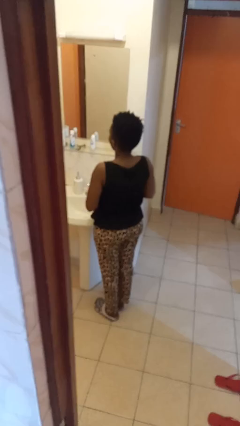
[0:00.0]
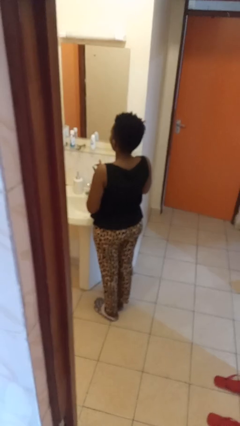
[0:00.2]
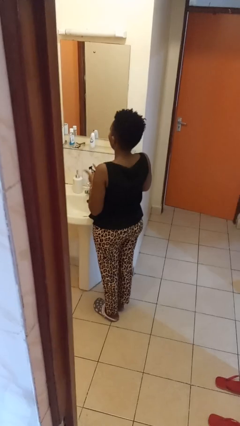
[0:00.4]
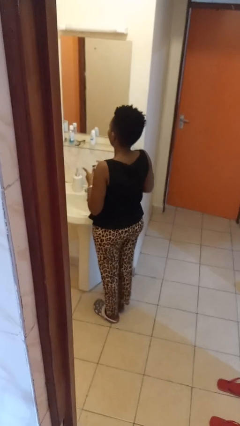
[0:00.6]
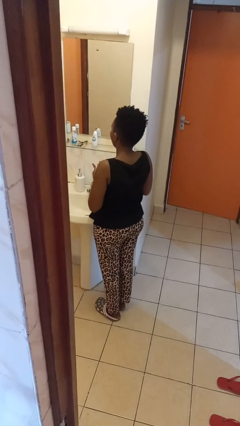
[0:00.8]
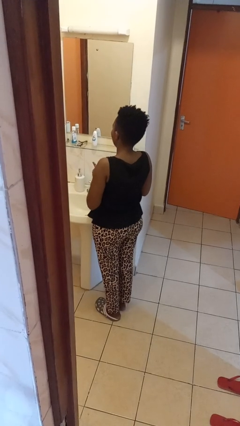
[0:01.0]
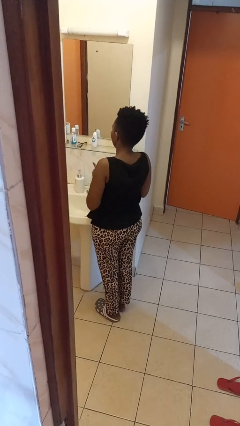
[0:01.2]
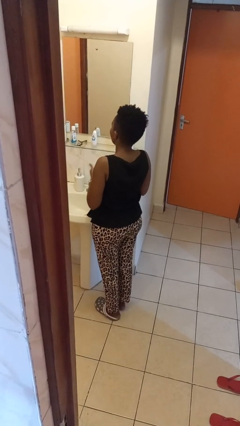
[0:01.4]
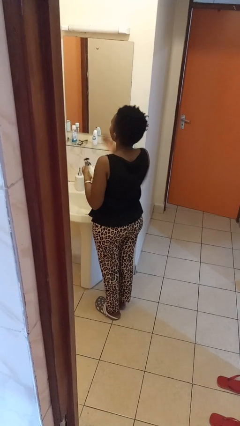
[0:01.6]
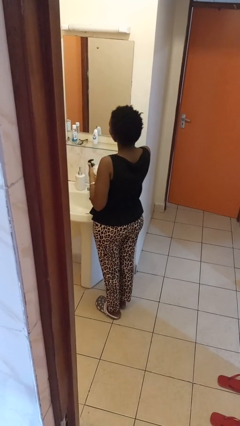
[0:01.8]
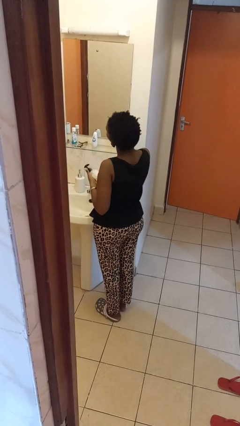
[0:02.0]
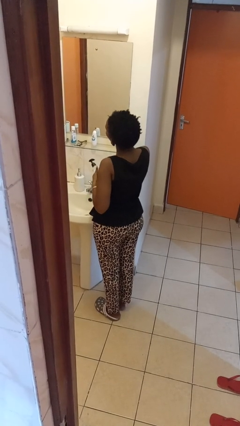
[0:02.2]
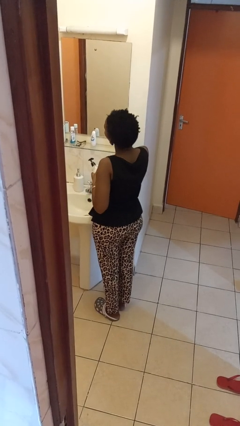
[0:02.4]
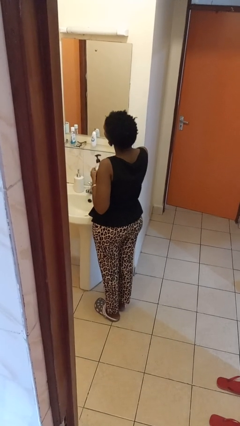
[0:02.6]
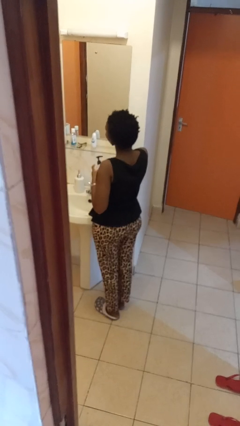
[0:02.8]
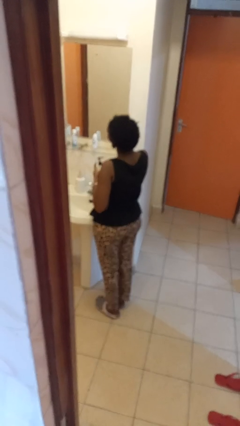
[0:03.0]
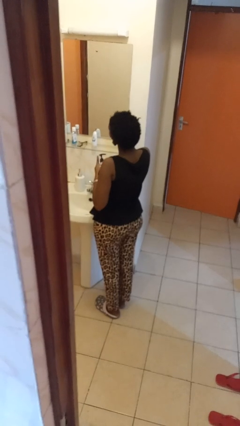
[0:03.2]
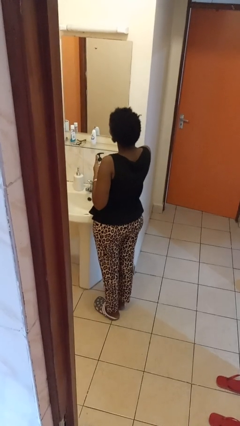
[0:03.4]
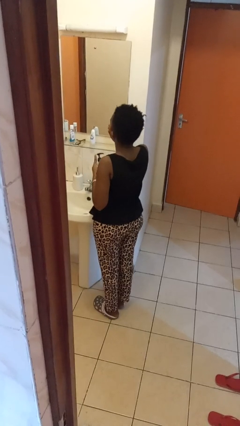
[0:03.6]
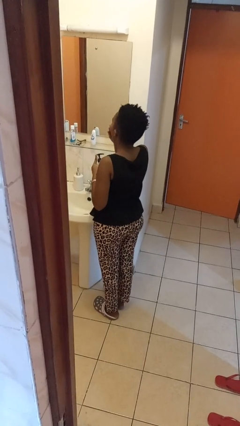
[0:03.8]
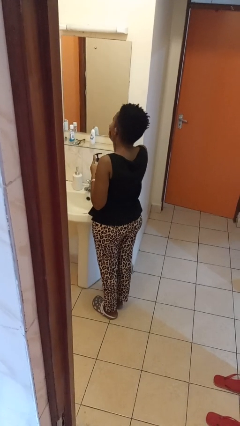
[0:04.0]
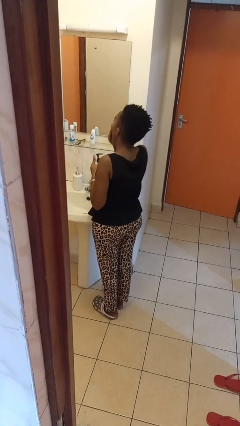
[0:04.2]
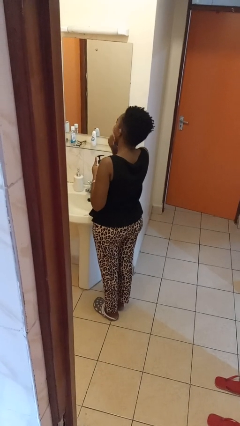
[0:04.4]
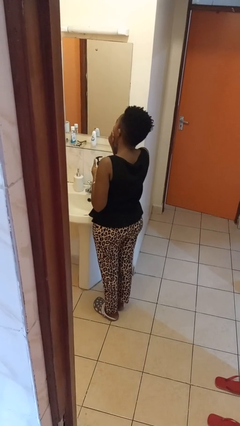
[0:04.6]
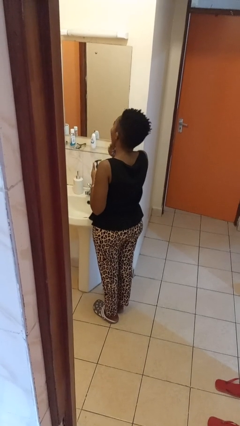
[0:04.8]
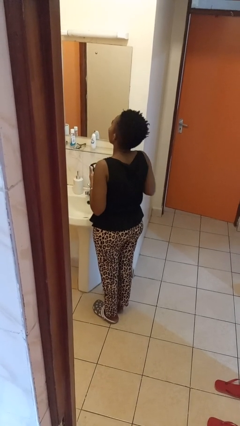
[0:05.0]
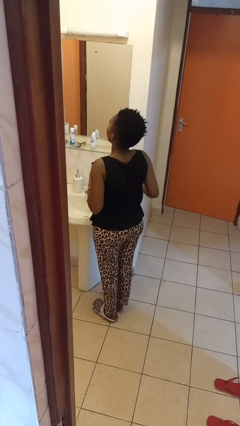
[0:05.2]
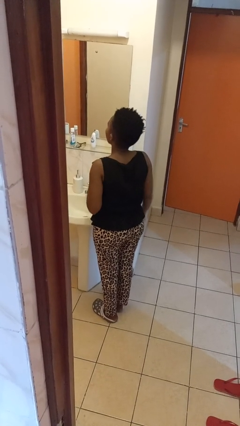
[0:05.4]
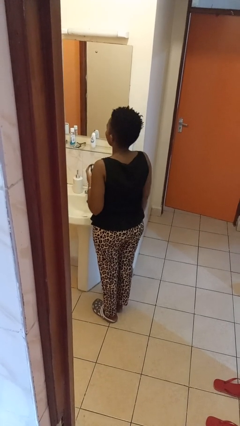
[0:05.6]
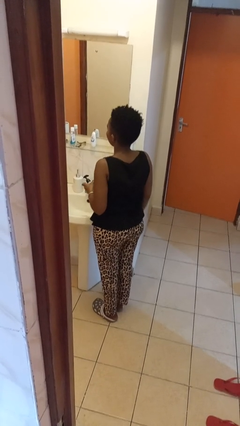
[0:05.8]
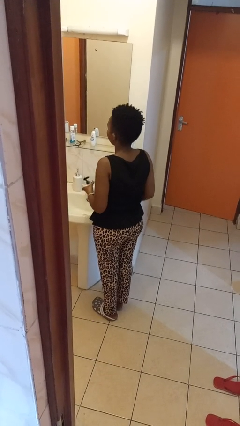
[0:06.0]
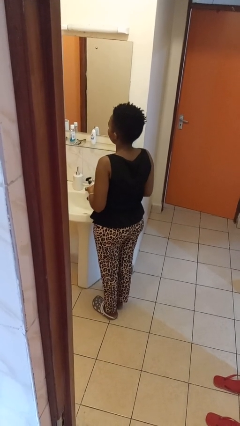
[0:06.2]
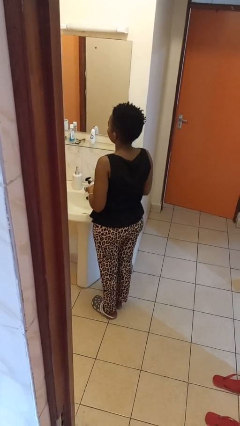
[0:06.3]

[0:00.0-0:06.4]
person applies facial moisturizer

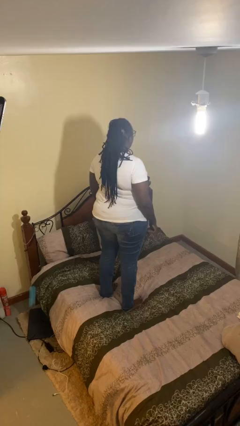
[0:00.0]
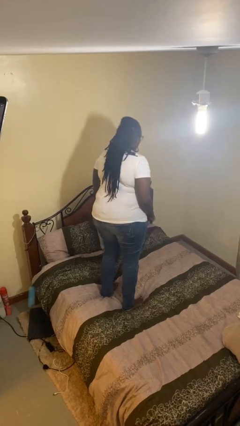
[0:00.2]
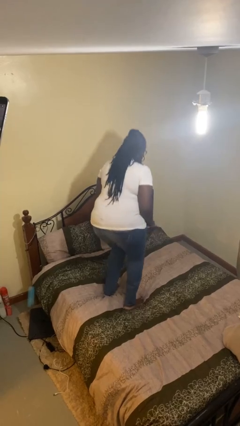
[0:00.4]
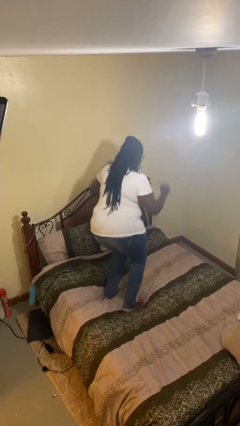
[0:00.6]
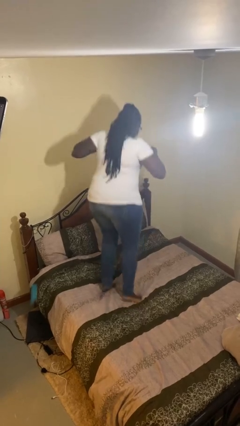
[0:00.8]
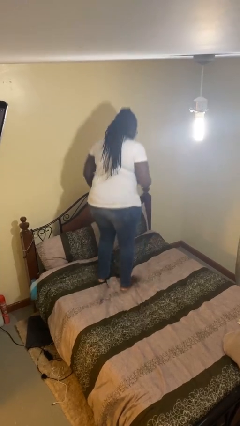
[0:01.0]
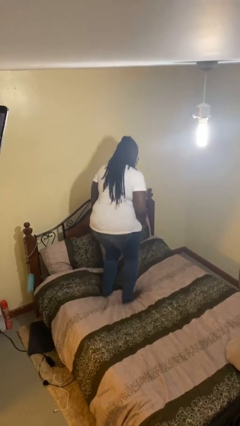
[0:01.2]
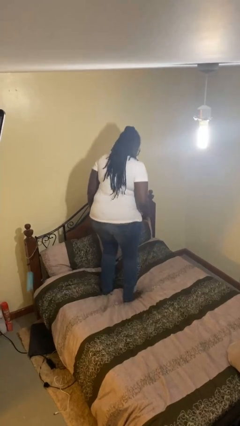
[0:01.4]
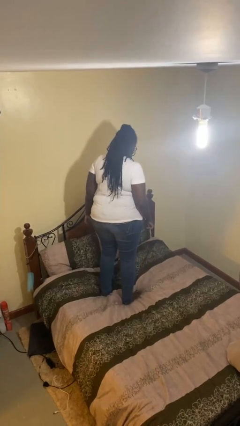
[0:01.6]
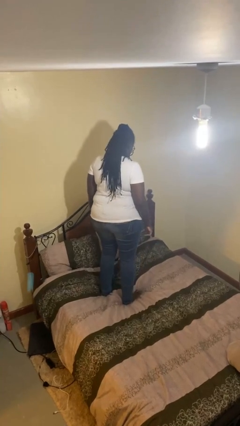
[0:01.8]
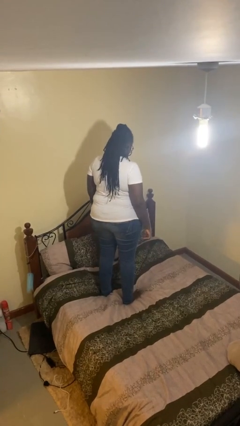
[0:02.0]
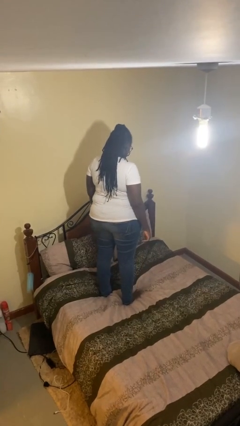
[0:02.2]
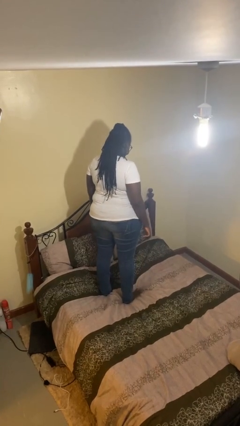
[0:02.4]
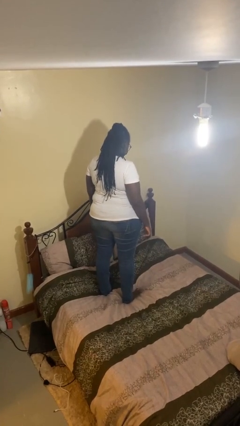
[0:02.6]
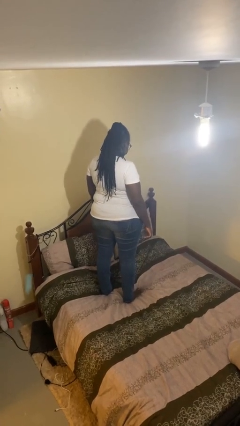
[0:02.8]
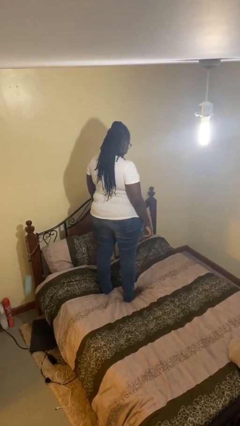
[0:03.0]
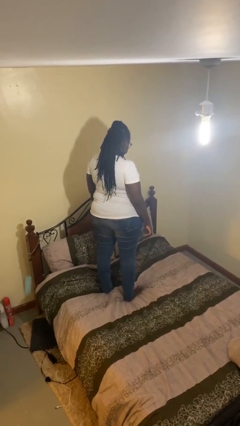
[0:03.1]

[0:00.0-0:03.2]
person jumps on bed

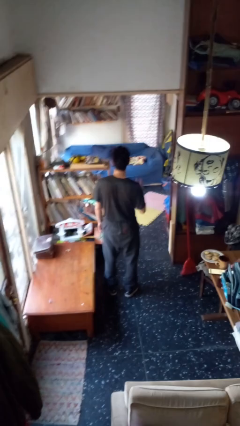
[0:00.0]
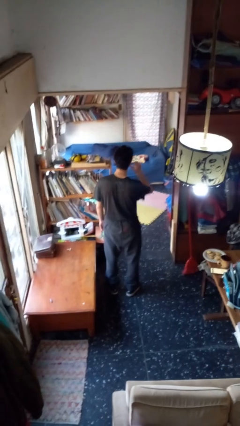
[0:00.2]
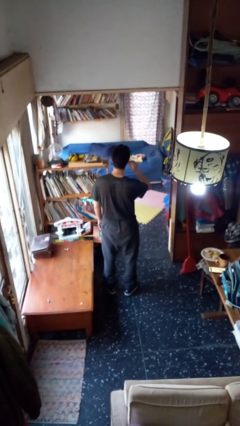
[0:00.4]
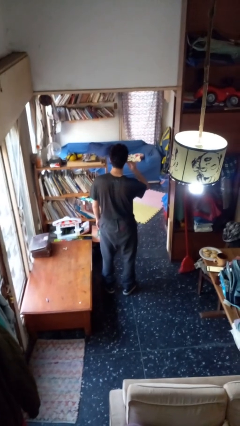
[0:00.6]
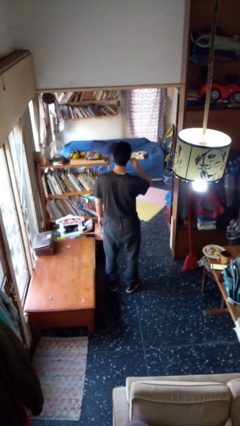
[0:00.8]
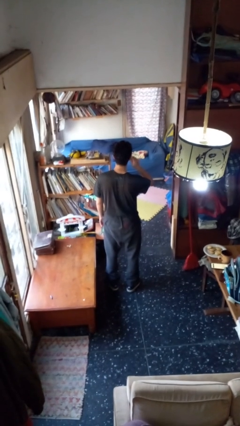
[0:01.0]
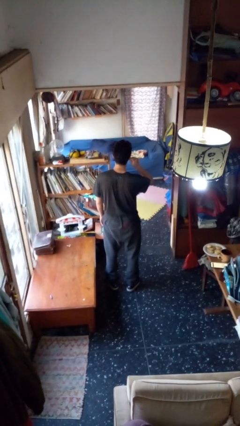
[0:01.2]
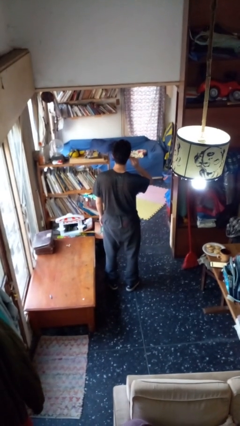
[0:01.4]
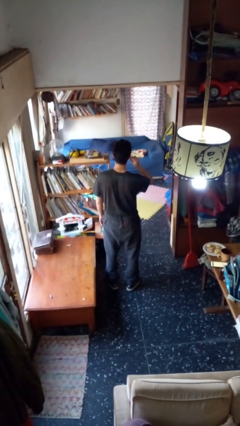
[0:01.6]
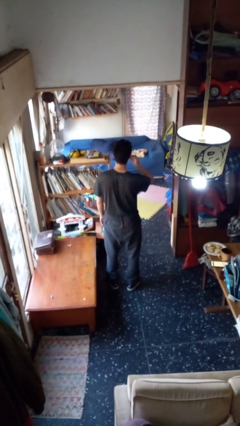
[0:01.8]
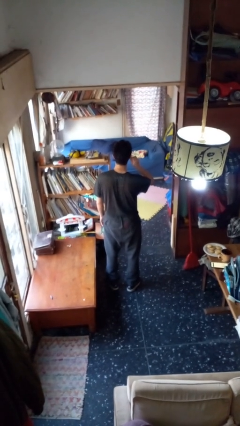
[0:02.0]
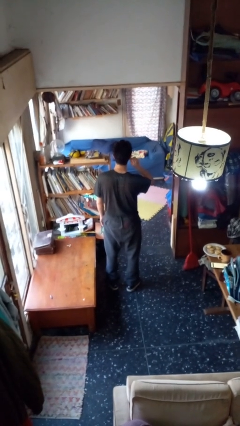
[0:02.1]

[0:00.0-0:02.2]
person touches earlobe

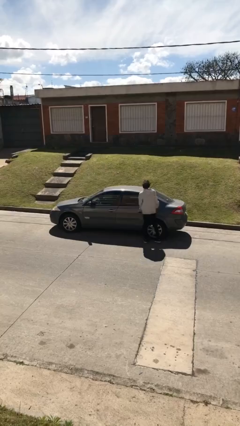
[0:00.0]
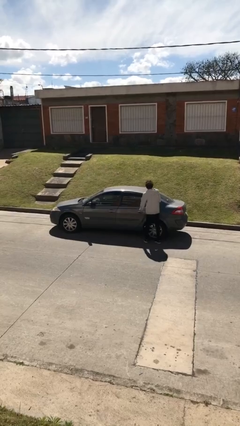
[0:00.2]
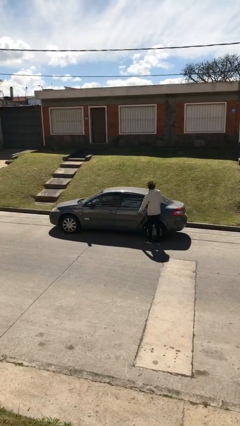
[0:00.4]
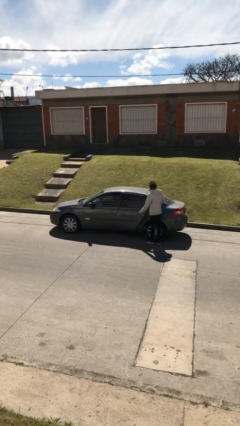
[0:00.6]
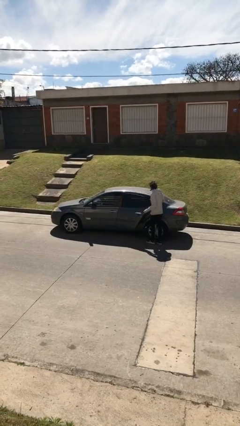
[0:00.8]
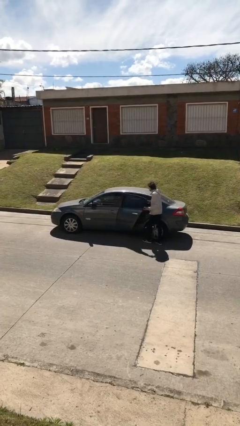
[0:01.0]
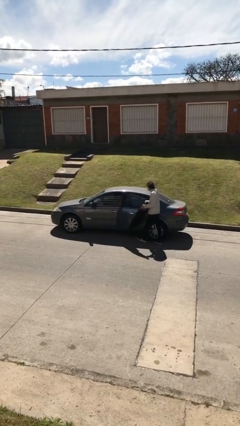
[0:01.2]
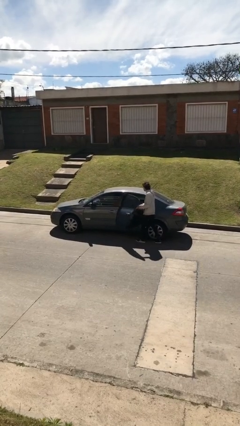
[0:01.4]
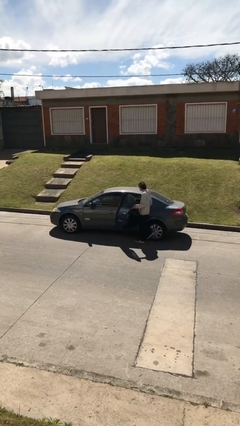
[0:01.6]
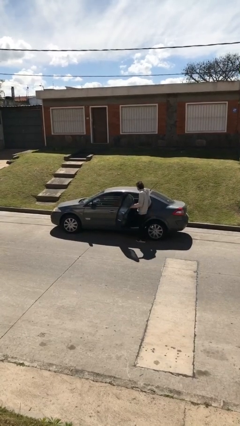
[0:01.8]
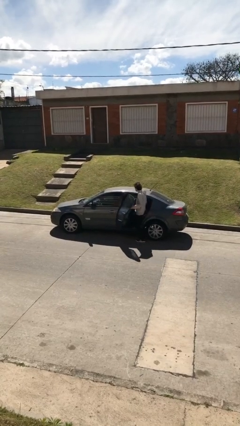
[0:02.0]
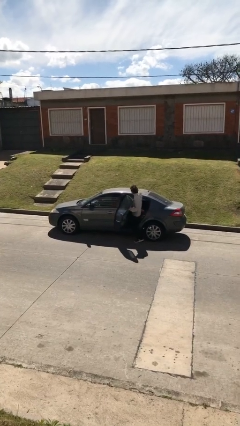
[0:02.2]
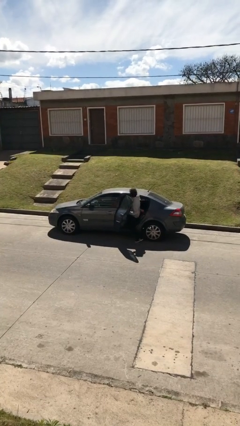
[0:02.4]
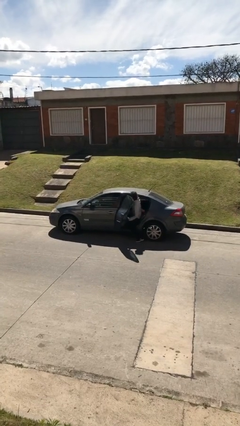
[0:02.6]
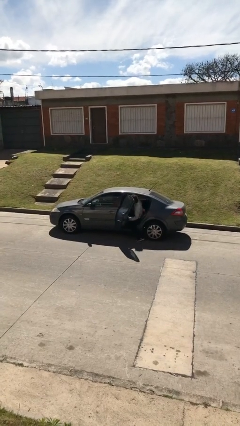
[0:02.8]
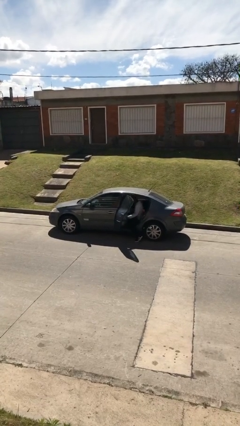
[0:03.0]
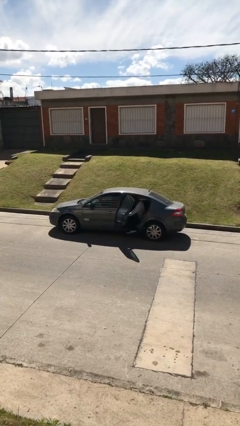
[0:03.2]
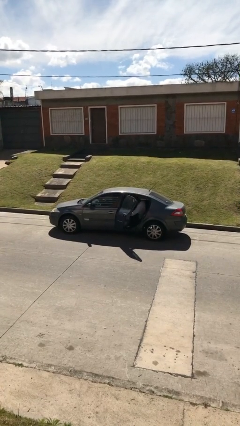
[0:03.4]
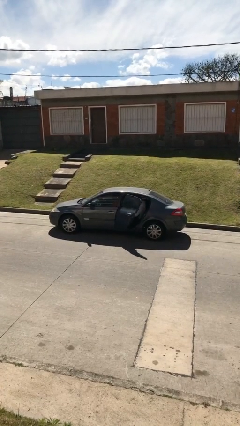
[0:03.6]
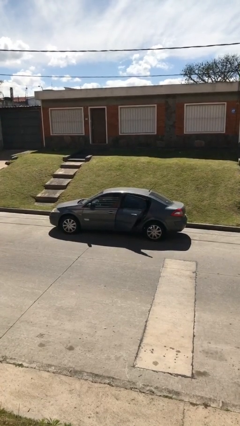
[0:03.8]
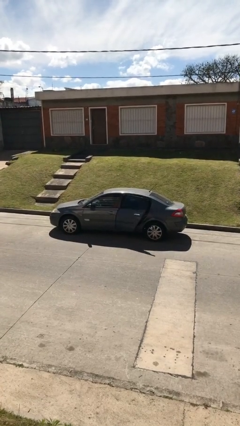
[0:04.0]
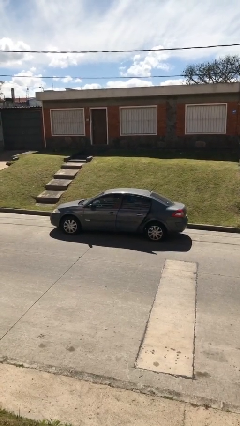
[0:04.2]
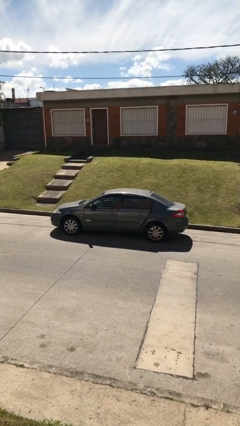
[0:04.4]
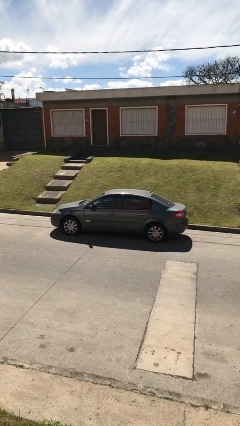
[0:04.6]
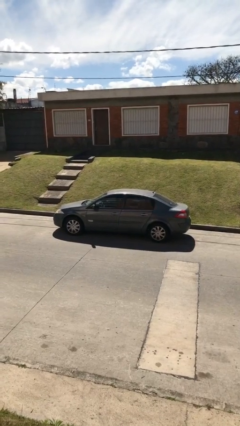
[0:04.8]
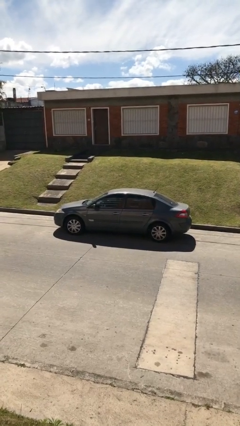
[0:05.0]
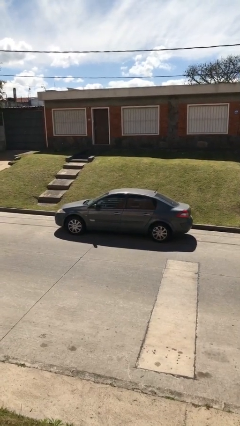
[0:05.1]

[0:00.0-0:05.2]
car picks up person

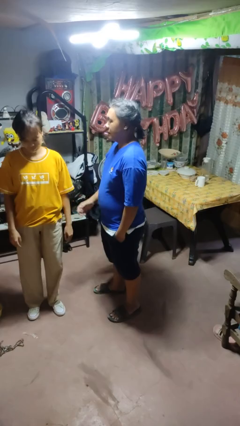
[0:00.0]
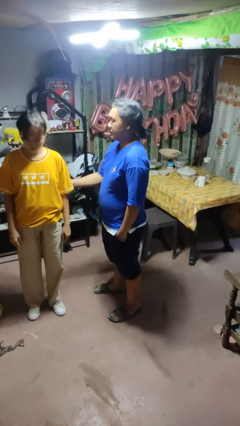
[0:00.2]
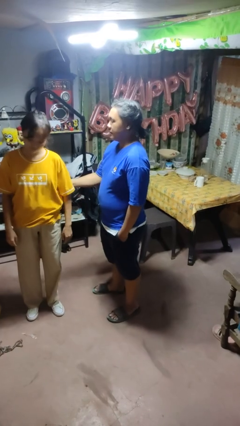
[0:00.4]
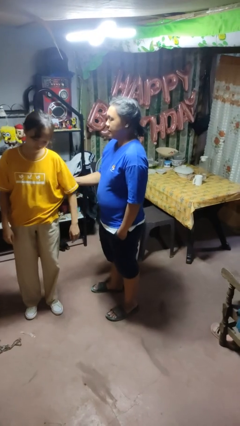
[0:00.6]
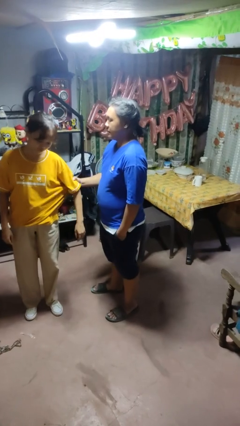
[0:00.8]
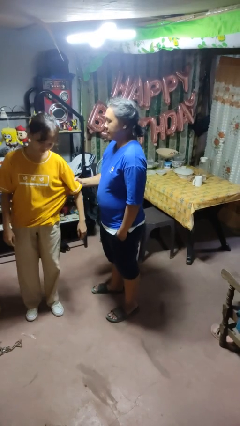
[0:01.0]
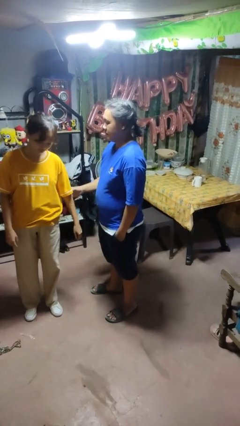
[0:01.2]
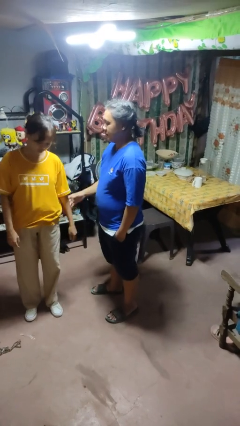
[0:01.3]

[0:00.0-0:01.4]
person grabs person by bicep
